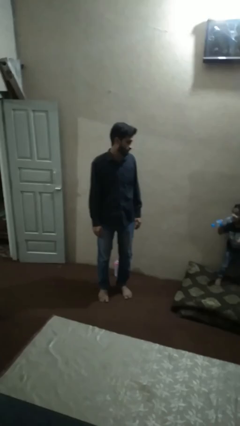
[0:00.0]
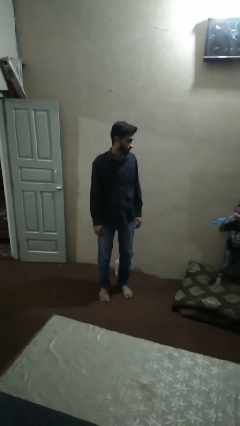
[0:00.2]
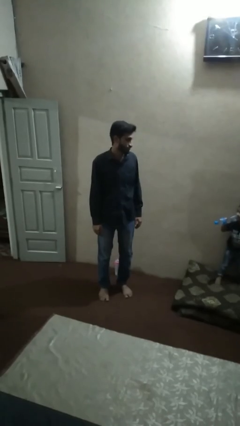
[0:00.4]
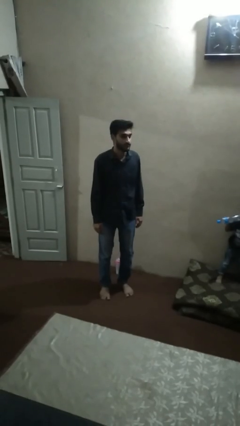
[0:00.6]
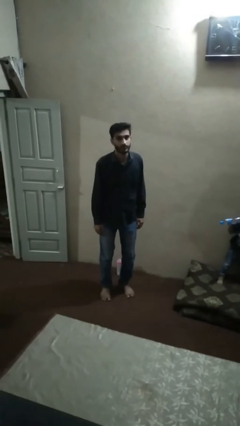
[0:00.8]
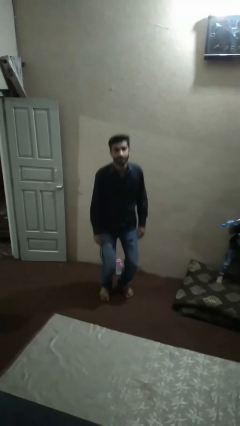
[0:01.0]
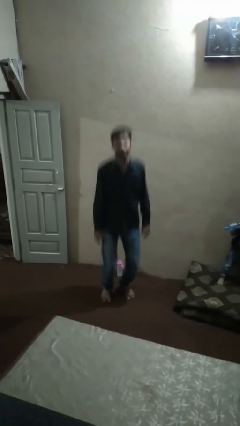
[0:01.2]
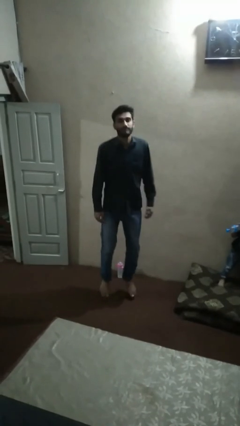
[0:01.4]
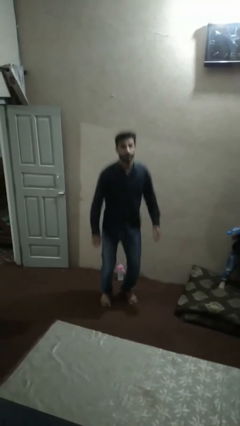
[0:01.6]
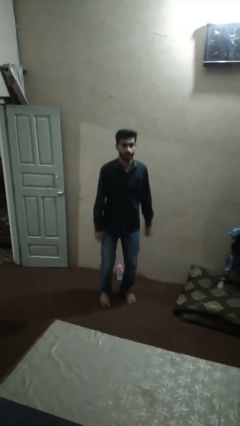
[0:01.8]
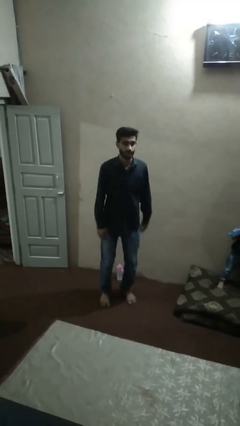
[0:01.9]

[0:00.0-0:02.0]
person jumps

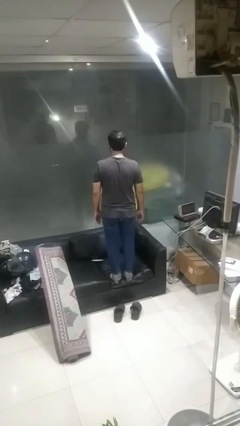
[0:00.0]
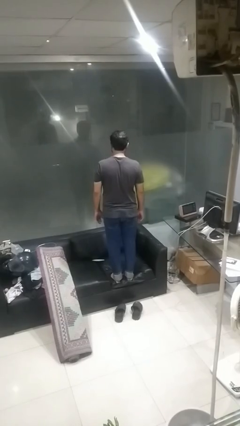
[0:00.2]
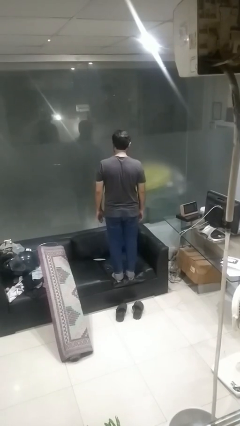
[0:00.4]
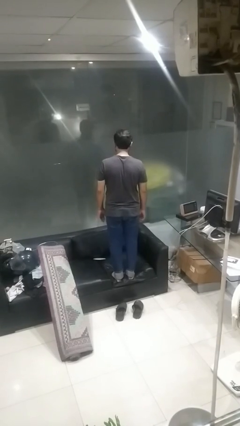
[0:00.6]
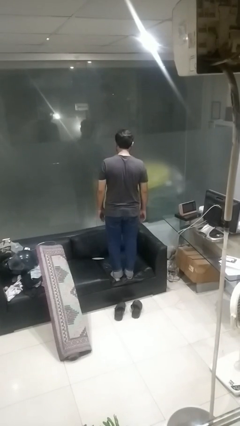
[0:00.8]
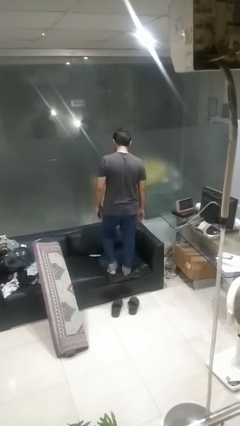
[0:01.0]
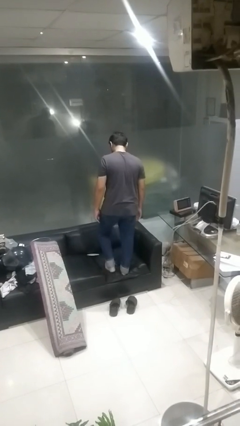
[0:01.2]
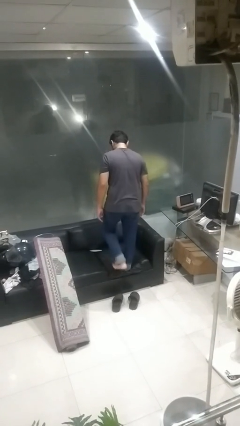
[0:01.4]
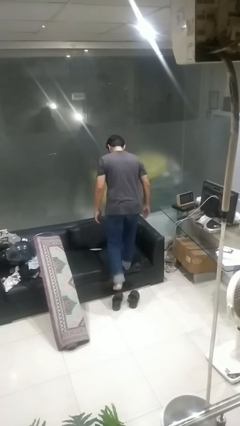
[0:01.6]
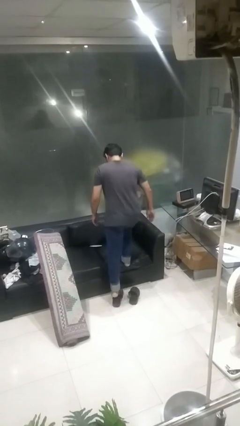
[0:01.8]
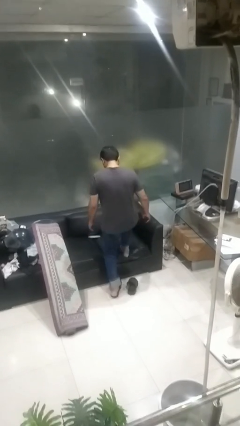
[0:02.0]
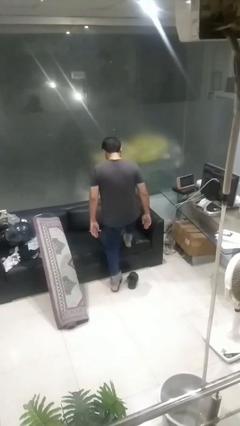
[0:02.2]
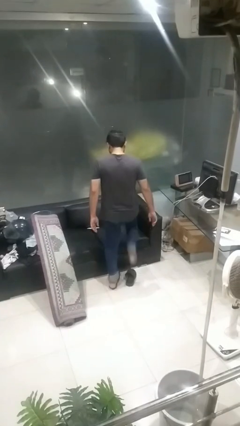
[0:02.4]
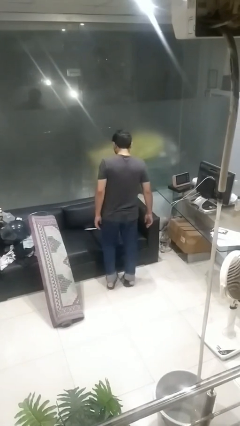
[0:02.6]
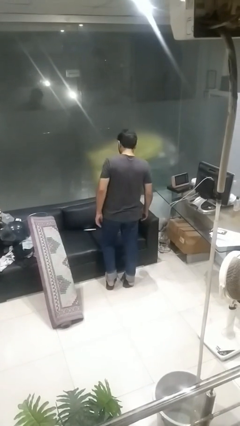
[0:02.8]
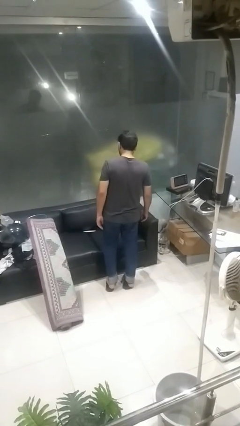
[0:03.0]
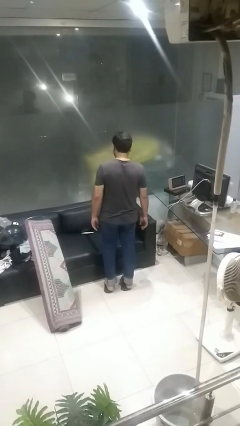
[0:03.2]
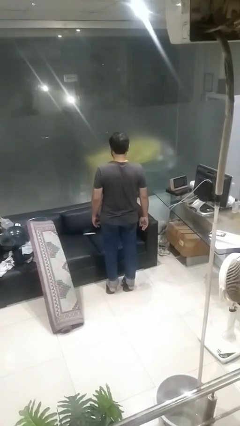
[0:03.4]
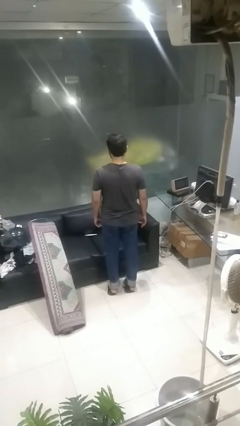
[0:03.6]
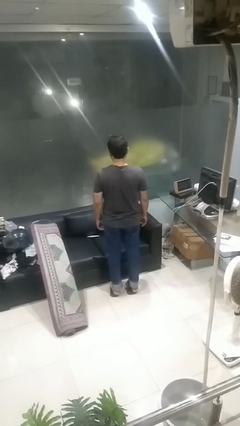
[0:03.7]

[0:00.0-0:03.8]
person climbs off couch

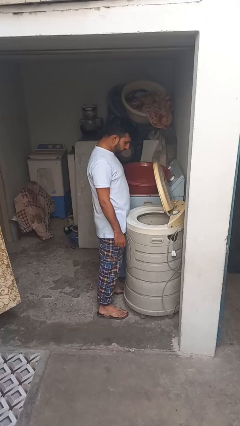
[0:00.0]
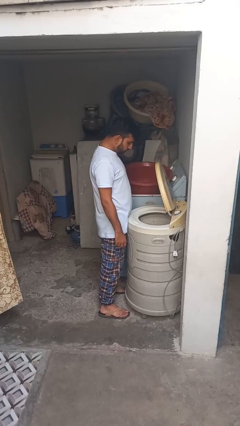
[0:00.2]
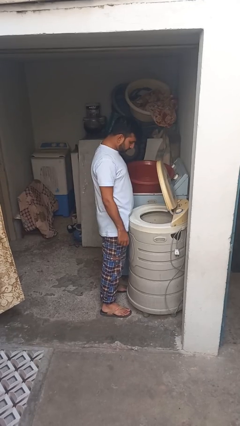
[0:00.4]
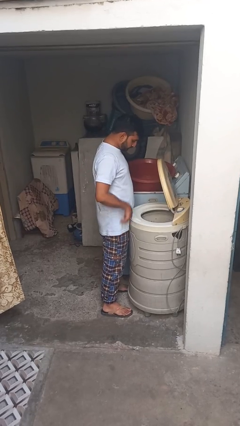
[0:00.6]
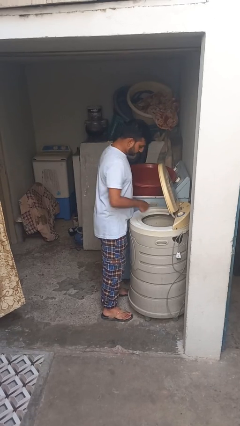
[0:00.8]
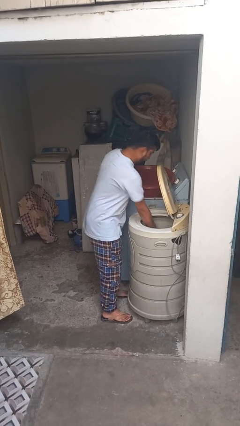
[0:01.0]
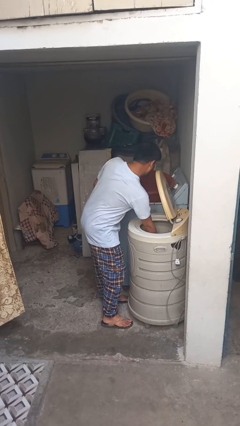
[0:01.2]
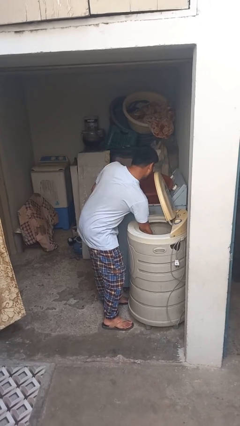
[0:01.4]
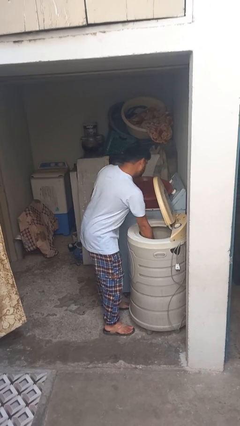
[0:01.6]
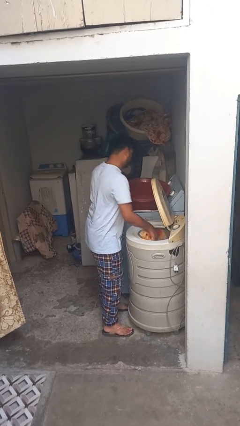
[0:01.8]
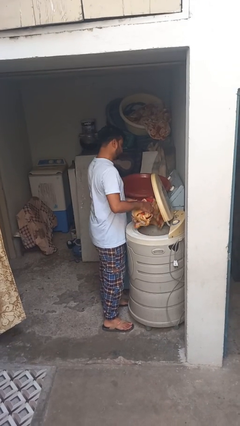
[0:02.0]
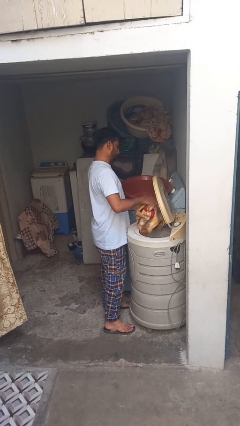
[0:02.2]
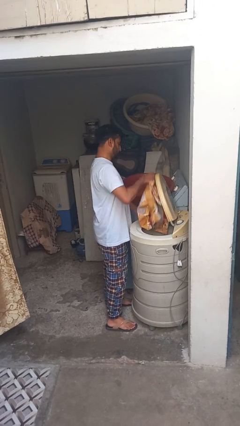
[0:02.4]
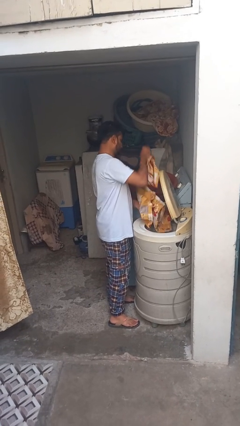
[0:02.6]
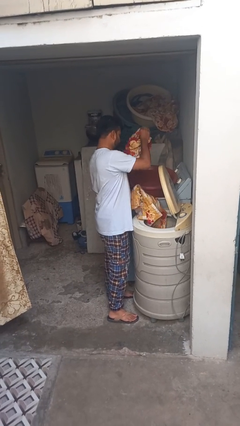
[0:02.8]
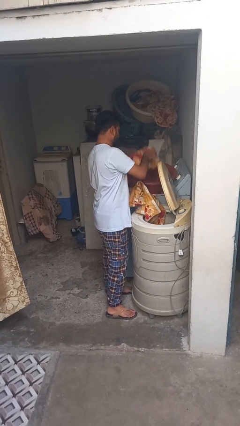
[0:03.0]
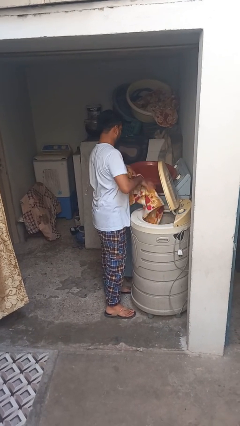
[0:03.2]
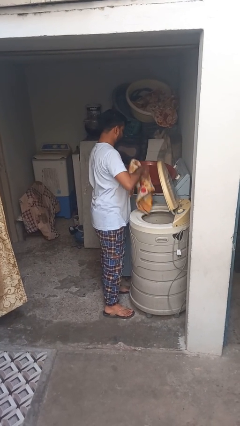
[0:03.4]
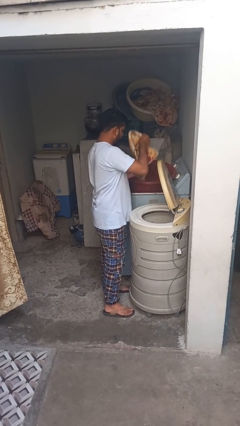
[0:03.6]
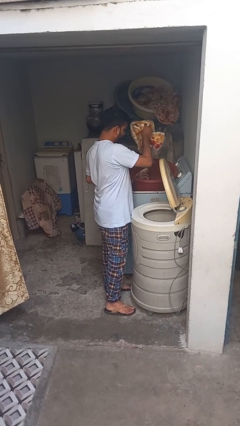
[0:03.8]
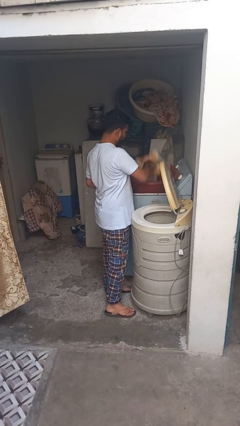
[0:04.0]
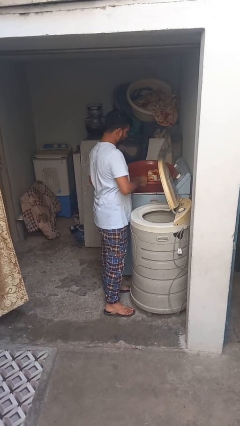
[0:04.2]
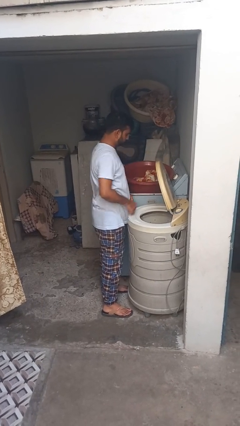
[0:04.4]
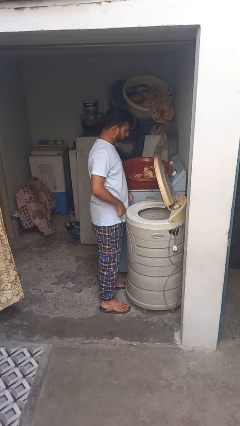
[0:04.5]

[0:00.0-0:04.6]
person unloads clotheswasher

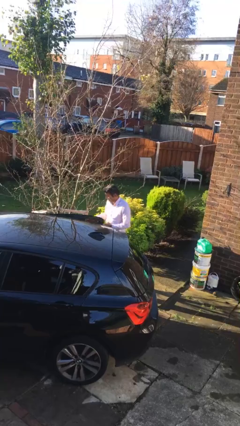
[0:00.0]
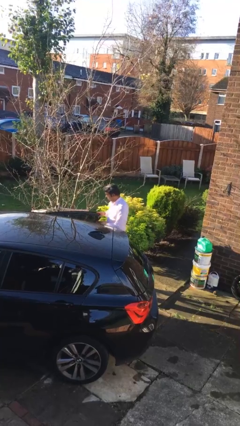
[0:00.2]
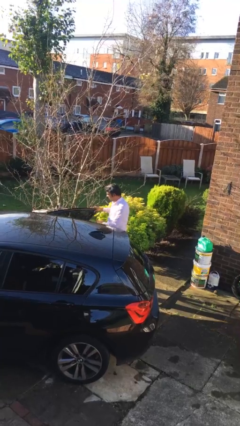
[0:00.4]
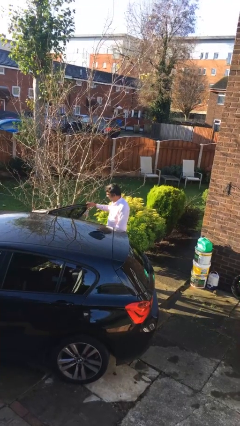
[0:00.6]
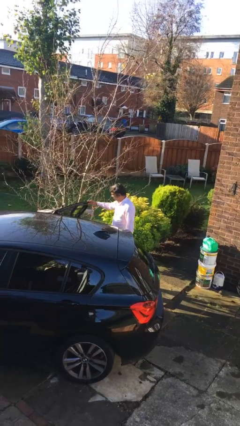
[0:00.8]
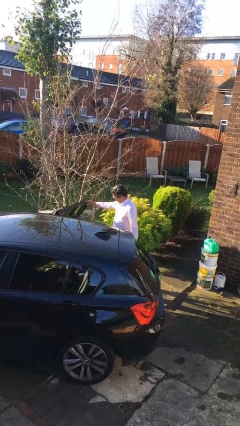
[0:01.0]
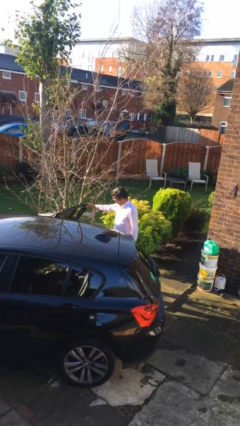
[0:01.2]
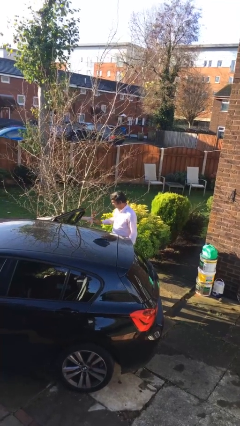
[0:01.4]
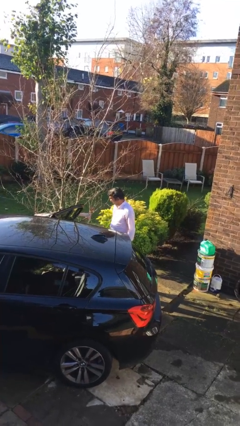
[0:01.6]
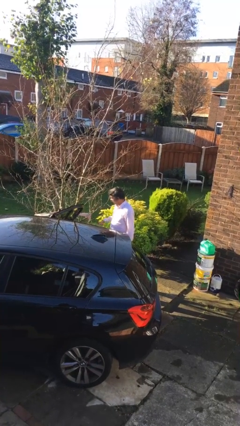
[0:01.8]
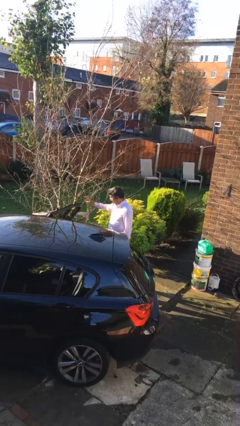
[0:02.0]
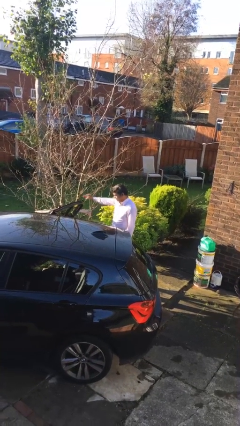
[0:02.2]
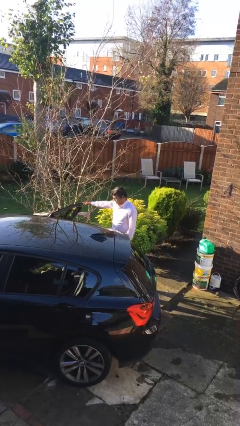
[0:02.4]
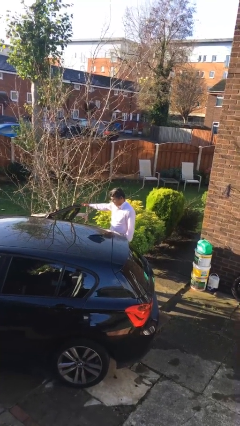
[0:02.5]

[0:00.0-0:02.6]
person opens car door

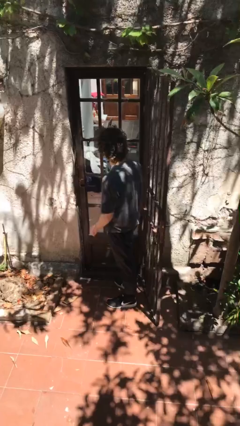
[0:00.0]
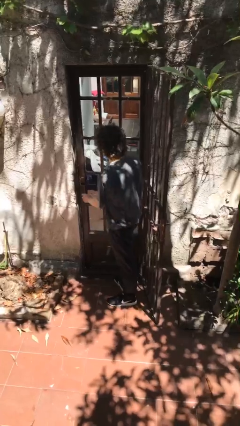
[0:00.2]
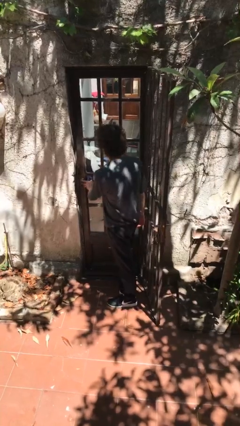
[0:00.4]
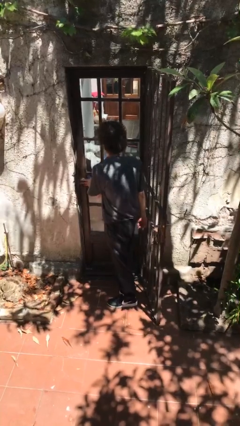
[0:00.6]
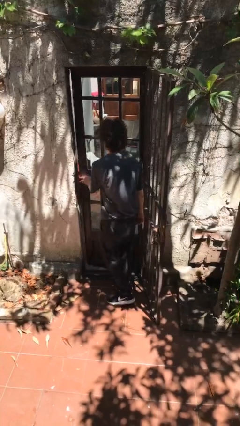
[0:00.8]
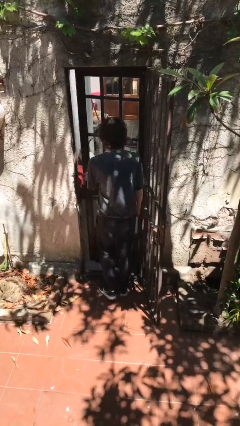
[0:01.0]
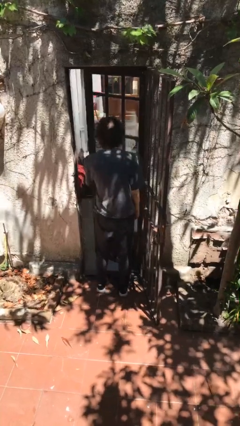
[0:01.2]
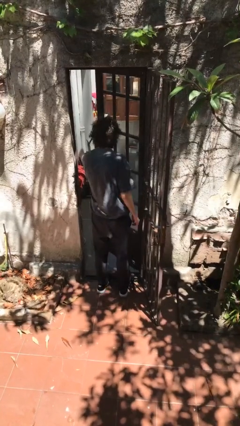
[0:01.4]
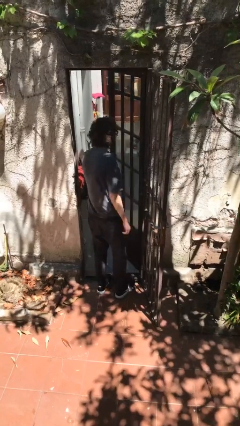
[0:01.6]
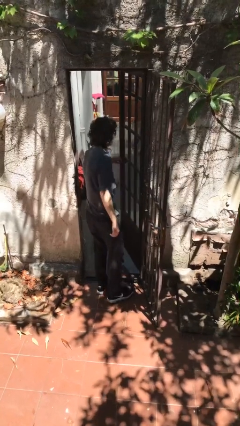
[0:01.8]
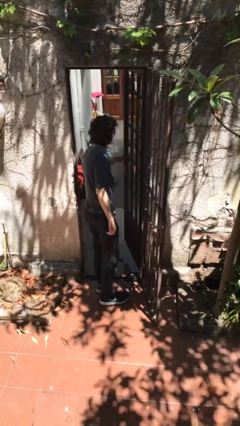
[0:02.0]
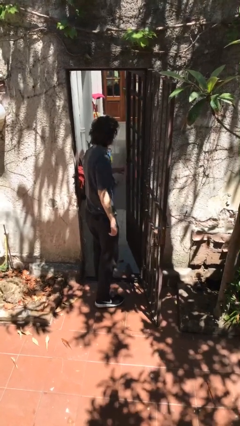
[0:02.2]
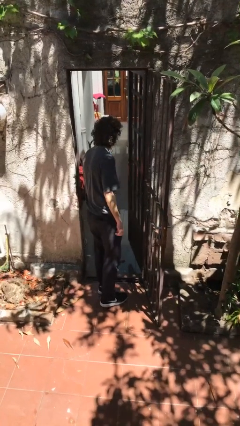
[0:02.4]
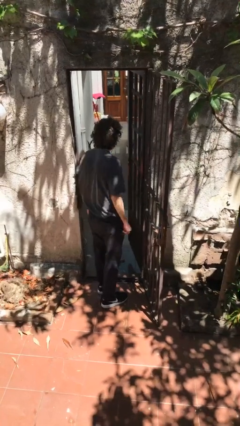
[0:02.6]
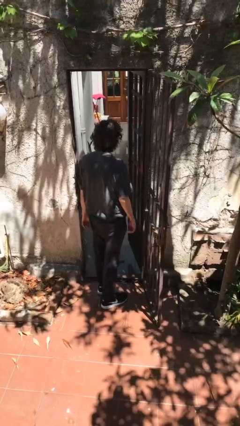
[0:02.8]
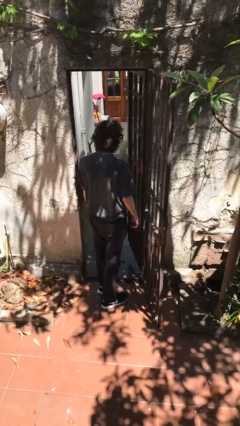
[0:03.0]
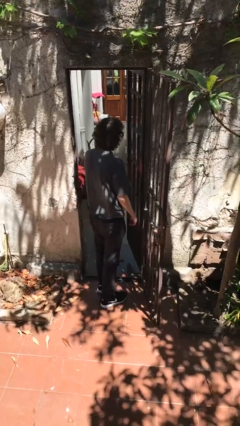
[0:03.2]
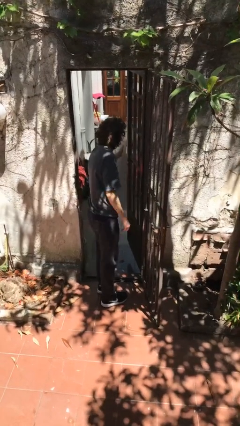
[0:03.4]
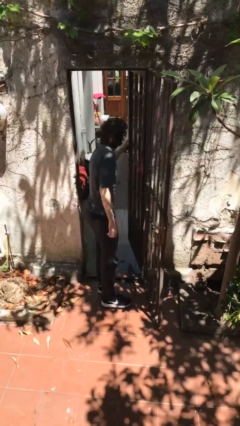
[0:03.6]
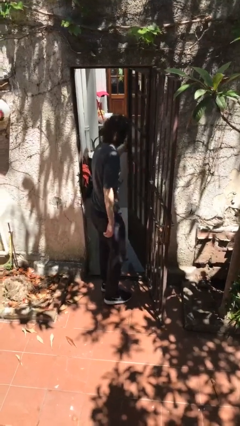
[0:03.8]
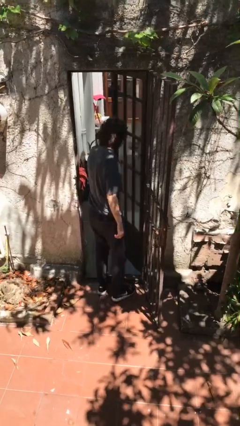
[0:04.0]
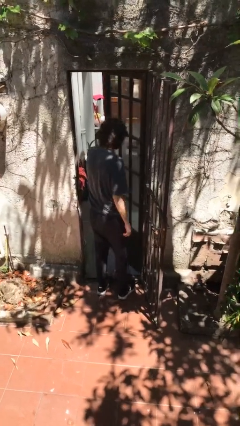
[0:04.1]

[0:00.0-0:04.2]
person opens facility door

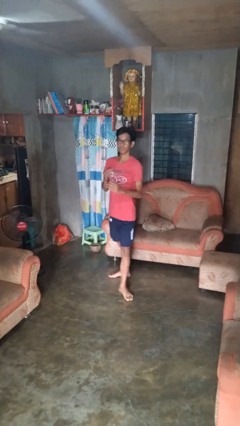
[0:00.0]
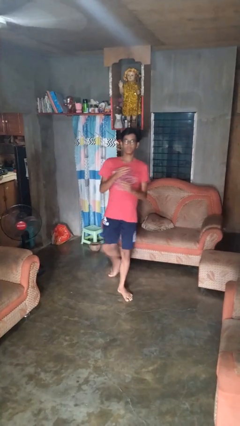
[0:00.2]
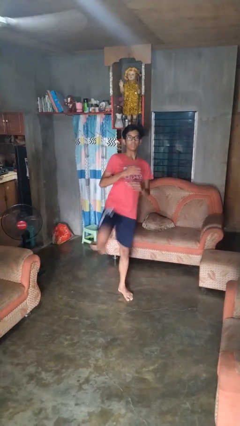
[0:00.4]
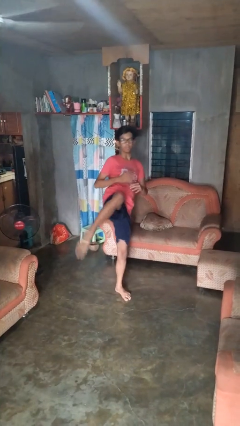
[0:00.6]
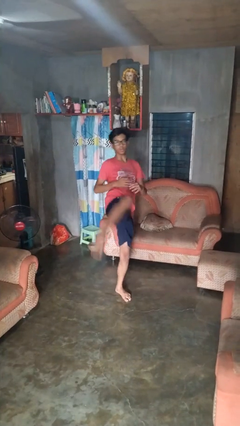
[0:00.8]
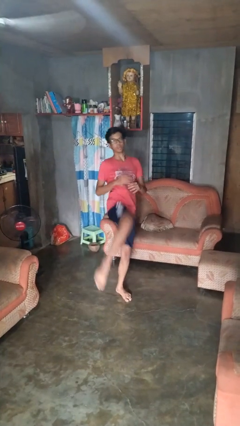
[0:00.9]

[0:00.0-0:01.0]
person karate kicks
